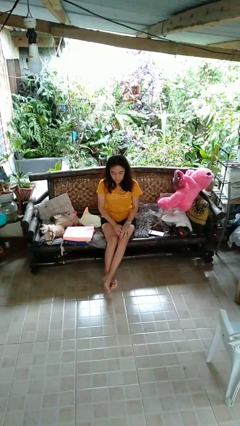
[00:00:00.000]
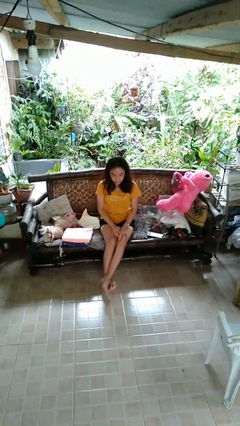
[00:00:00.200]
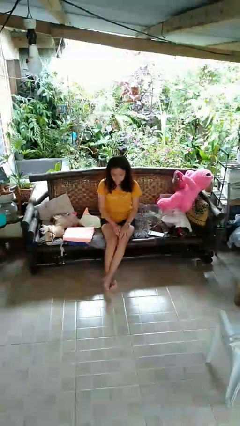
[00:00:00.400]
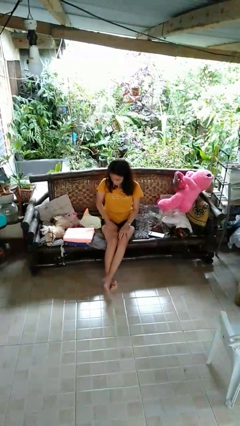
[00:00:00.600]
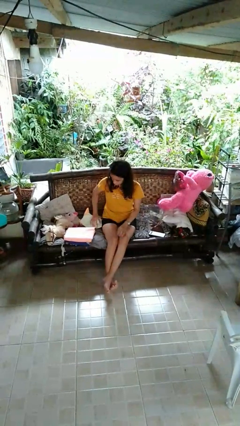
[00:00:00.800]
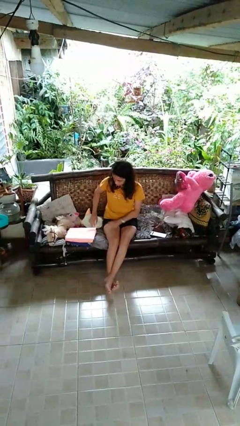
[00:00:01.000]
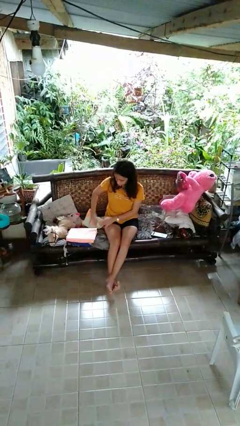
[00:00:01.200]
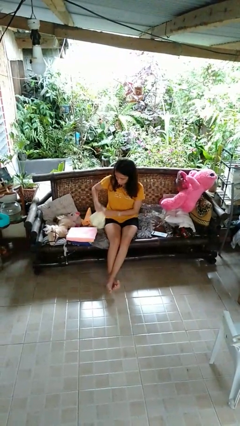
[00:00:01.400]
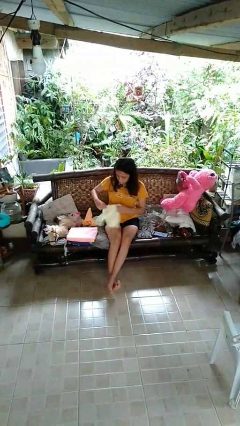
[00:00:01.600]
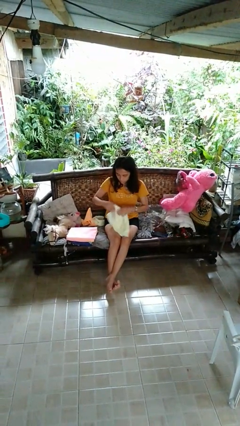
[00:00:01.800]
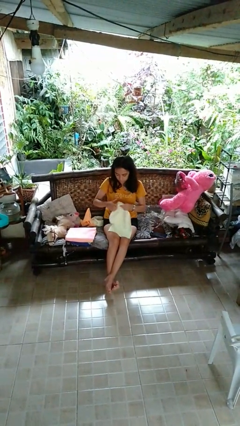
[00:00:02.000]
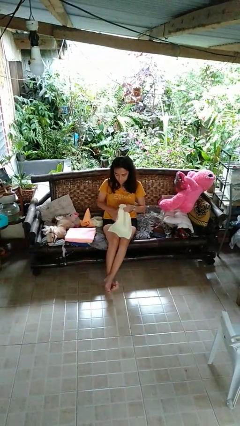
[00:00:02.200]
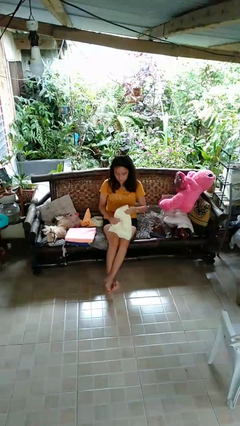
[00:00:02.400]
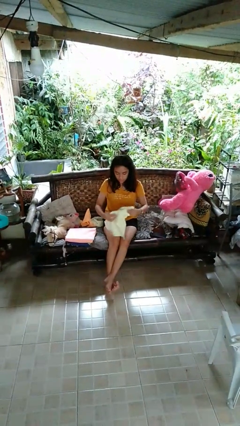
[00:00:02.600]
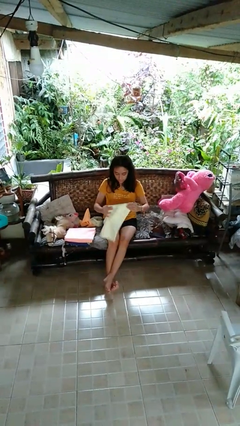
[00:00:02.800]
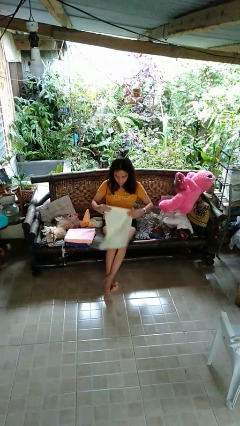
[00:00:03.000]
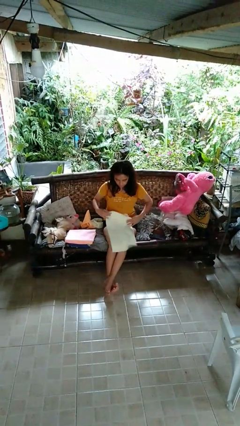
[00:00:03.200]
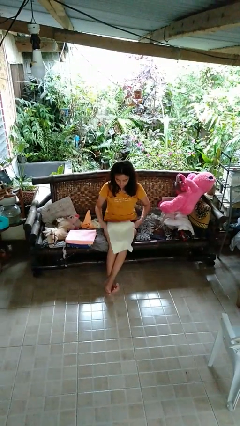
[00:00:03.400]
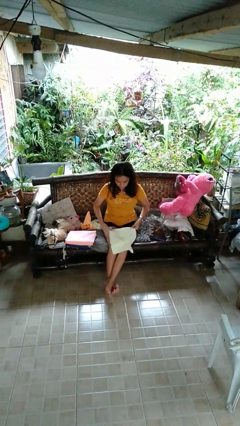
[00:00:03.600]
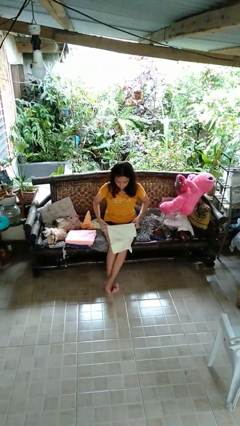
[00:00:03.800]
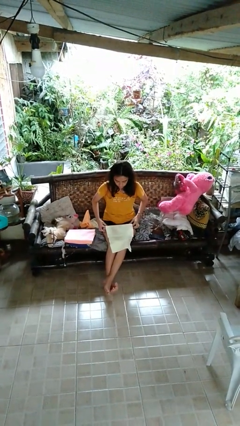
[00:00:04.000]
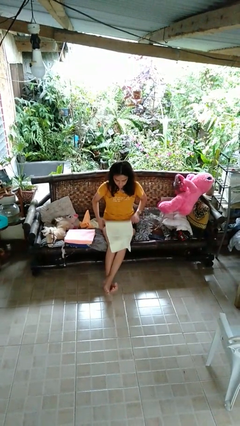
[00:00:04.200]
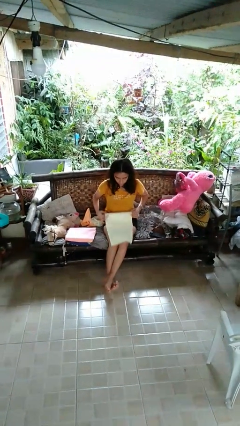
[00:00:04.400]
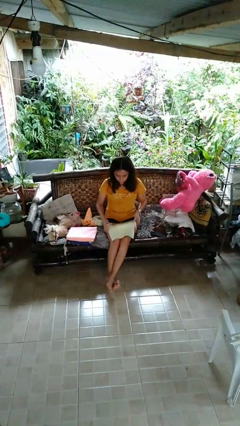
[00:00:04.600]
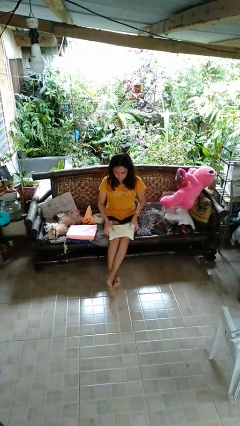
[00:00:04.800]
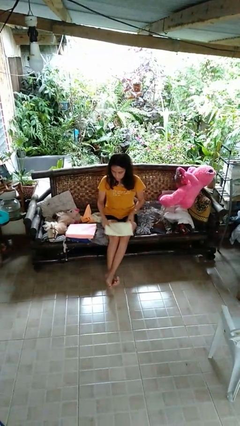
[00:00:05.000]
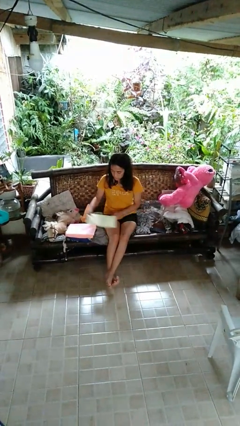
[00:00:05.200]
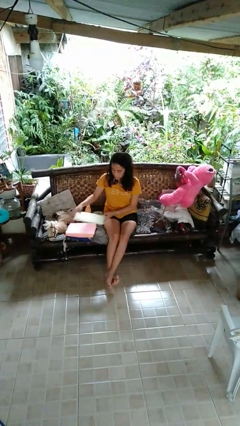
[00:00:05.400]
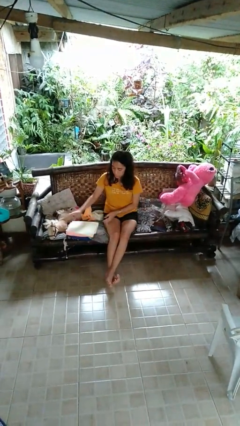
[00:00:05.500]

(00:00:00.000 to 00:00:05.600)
person folds towel

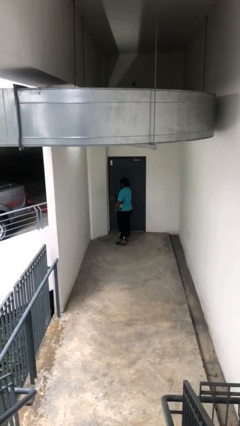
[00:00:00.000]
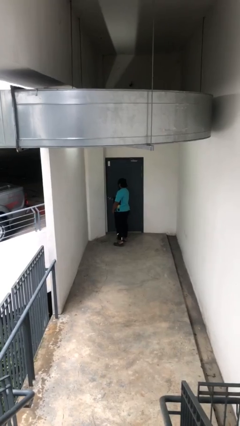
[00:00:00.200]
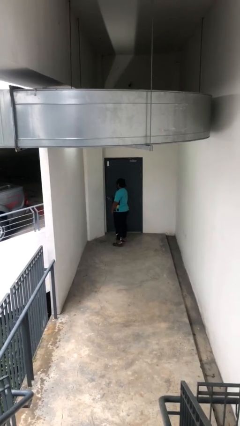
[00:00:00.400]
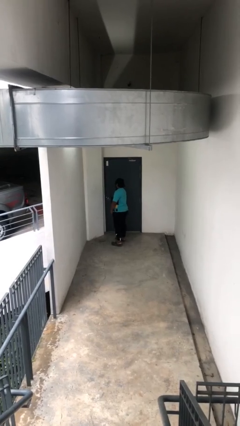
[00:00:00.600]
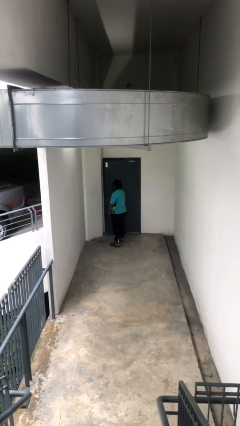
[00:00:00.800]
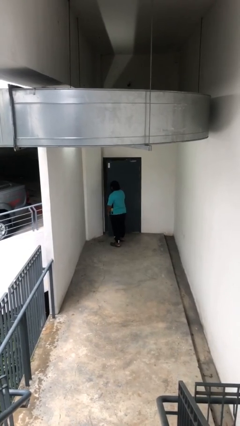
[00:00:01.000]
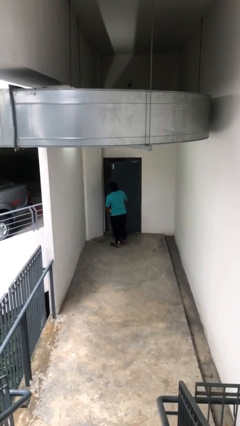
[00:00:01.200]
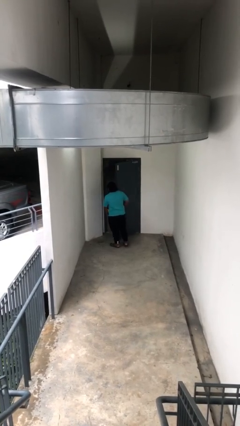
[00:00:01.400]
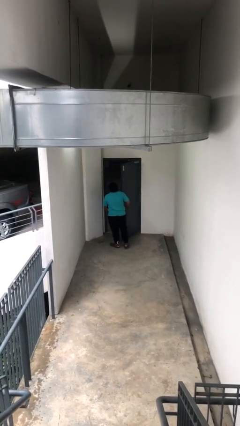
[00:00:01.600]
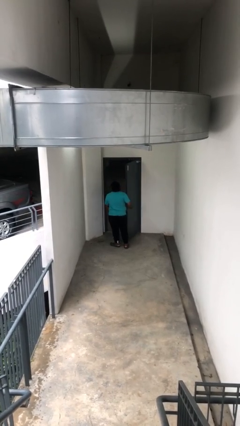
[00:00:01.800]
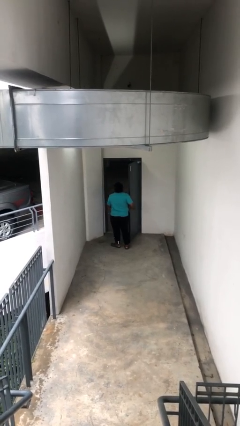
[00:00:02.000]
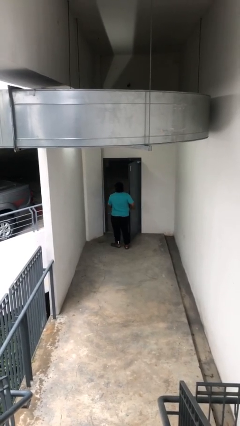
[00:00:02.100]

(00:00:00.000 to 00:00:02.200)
person opens facility door

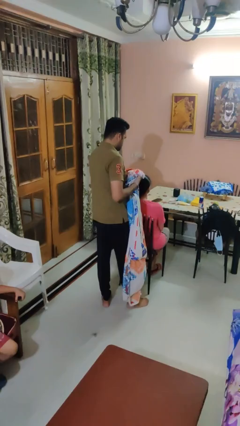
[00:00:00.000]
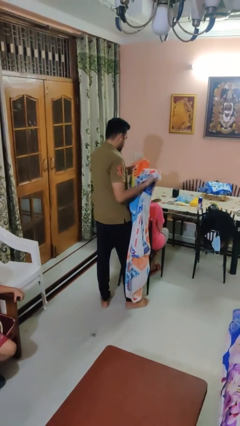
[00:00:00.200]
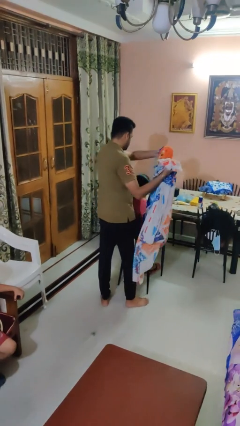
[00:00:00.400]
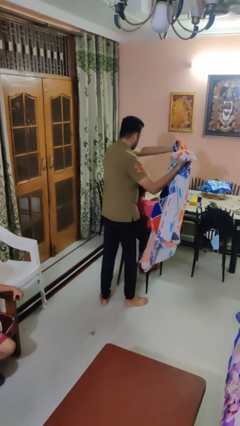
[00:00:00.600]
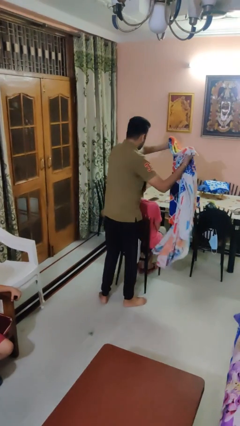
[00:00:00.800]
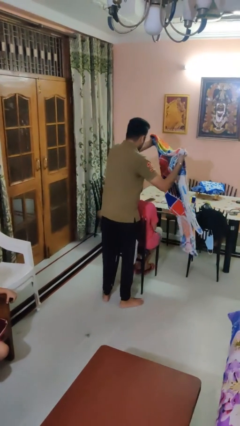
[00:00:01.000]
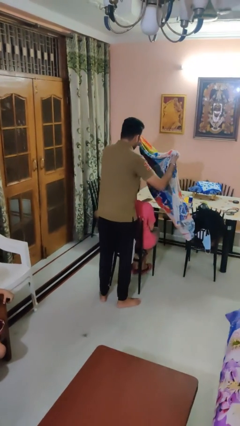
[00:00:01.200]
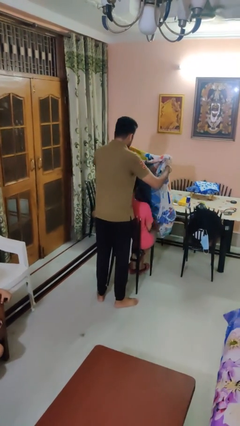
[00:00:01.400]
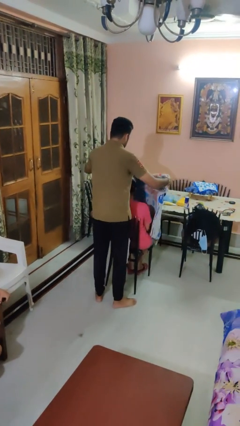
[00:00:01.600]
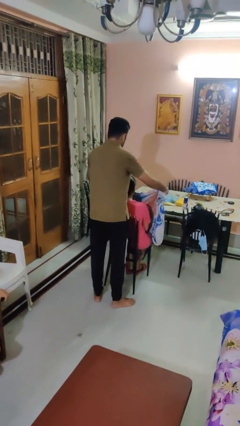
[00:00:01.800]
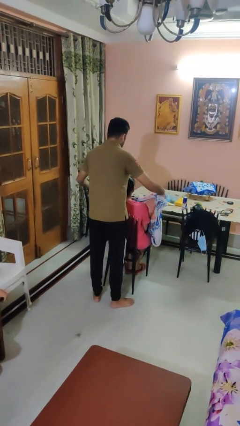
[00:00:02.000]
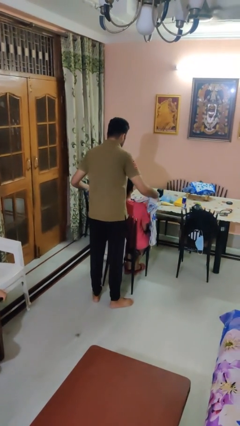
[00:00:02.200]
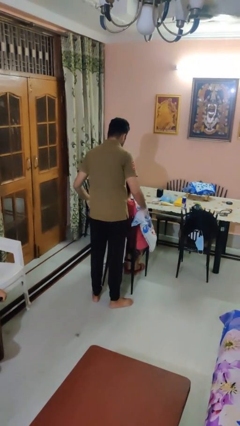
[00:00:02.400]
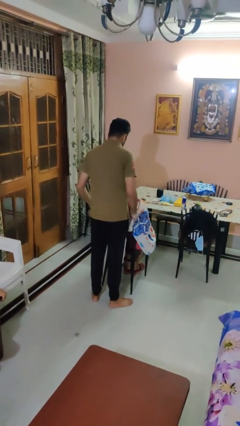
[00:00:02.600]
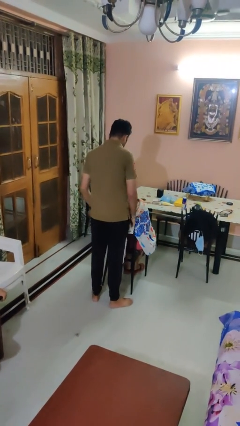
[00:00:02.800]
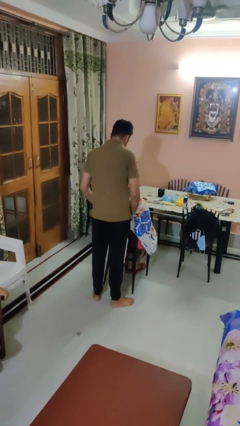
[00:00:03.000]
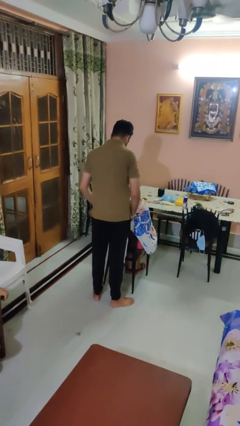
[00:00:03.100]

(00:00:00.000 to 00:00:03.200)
person covers friend with blanket

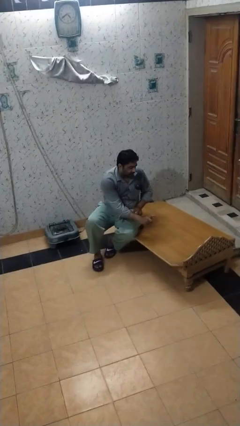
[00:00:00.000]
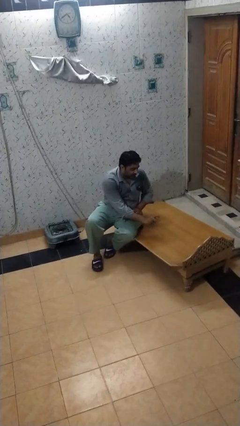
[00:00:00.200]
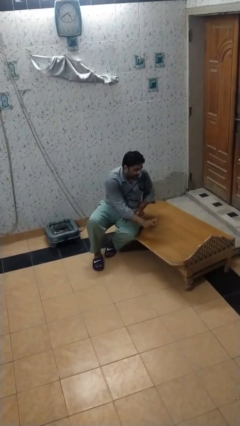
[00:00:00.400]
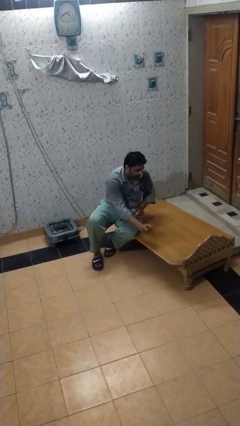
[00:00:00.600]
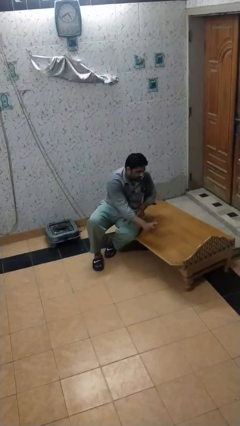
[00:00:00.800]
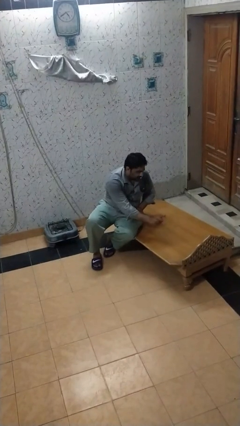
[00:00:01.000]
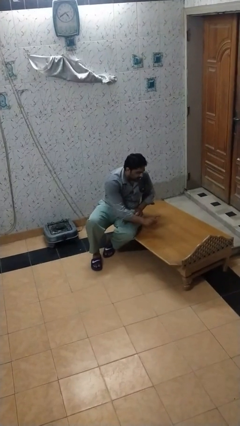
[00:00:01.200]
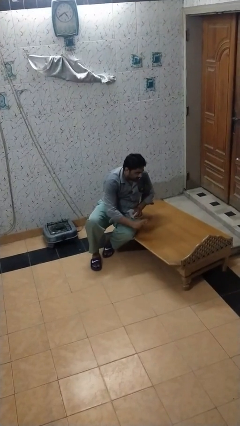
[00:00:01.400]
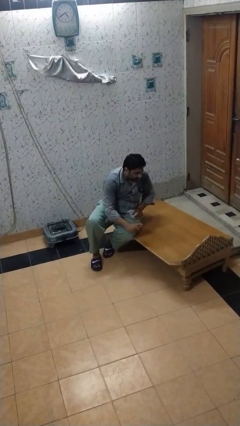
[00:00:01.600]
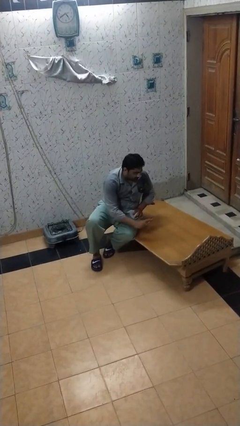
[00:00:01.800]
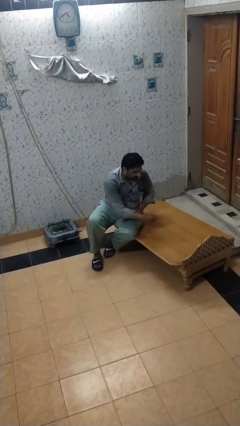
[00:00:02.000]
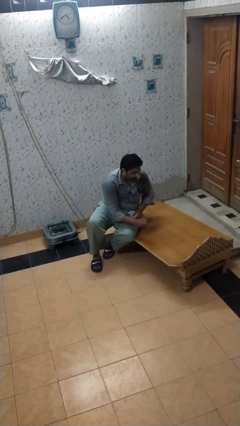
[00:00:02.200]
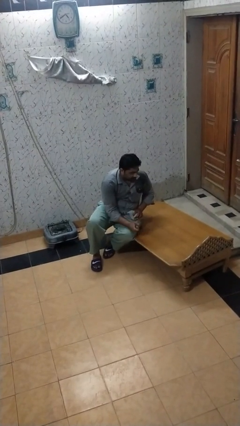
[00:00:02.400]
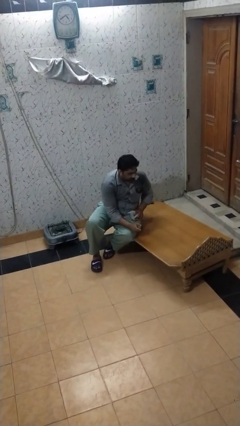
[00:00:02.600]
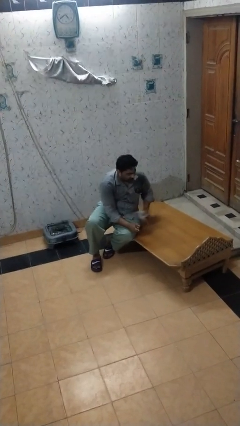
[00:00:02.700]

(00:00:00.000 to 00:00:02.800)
person sprays from bottle

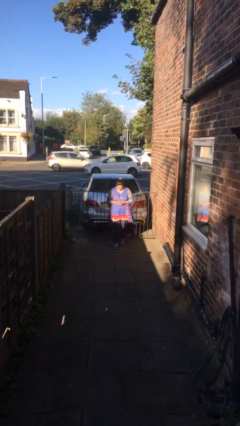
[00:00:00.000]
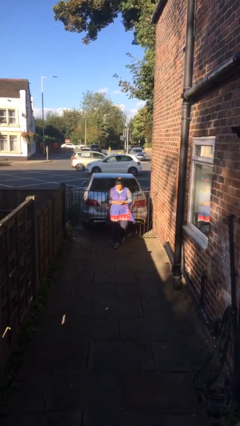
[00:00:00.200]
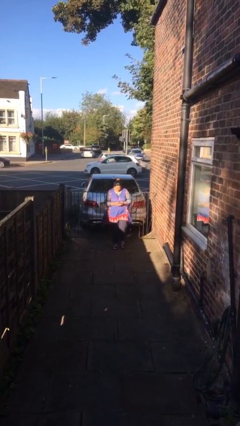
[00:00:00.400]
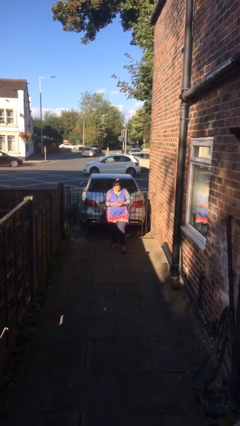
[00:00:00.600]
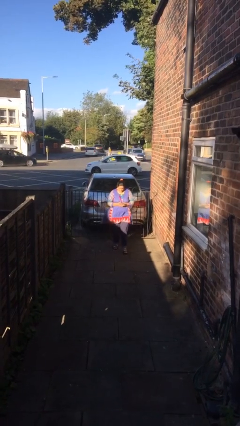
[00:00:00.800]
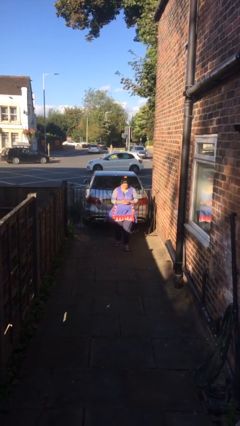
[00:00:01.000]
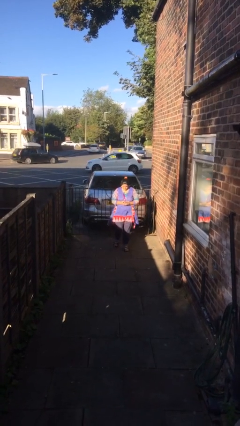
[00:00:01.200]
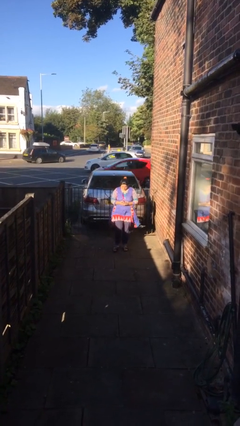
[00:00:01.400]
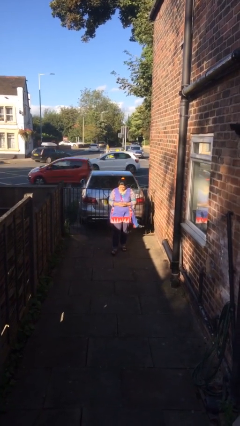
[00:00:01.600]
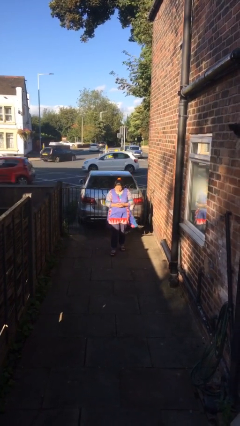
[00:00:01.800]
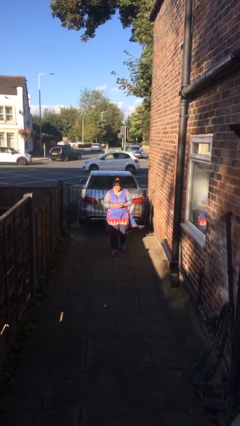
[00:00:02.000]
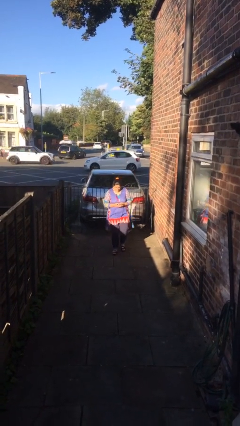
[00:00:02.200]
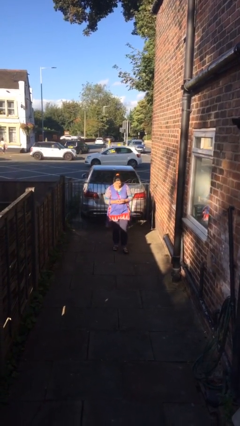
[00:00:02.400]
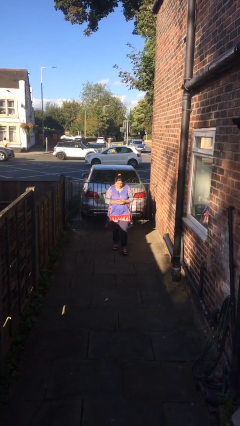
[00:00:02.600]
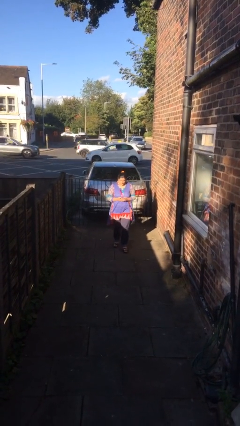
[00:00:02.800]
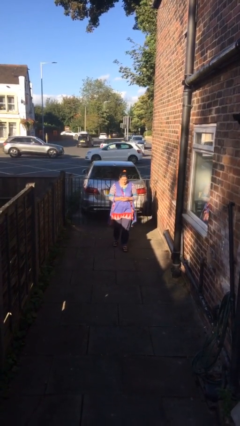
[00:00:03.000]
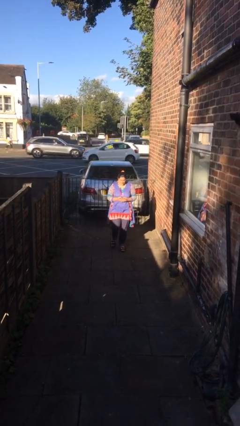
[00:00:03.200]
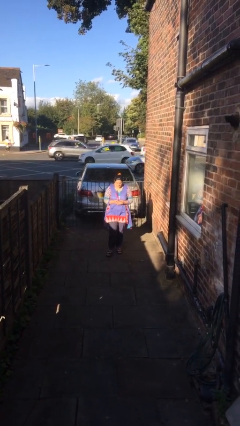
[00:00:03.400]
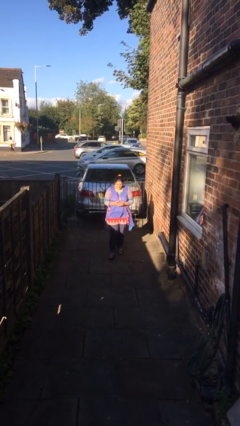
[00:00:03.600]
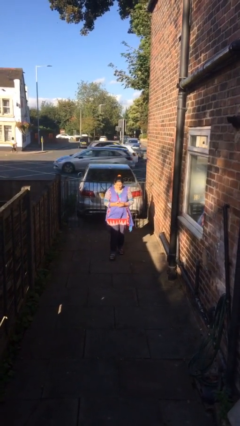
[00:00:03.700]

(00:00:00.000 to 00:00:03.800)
person texts on phone
